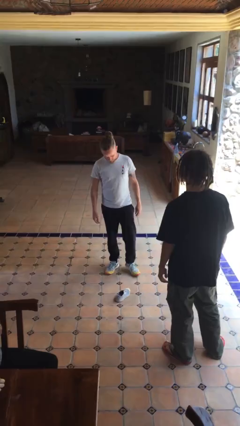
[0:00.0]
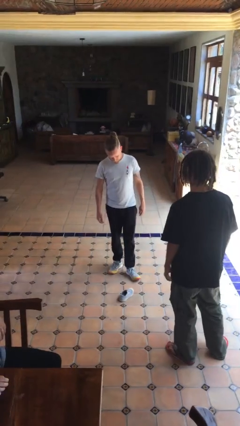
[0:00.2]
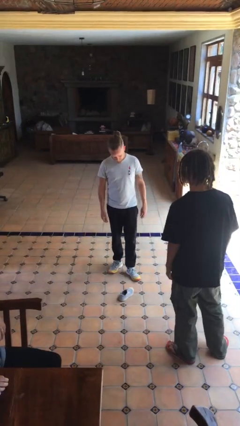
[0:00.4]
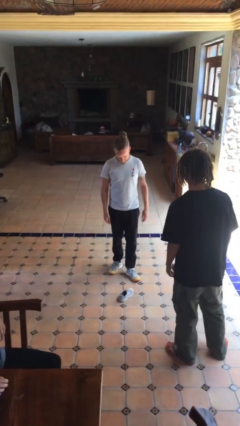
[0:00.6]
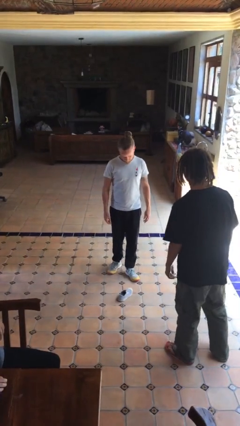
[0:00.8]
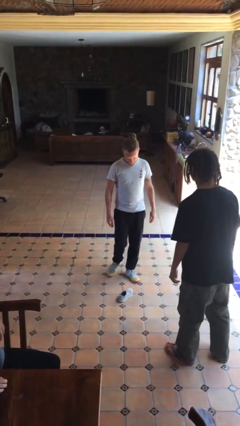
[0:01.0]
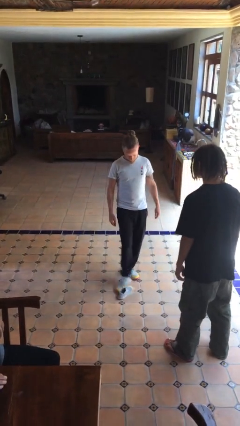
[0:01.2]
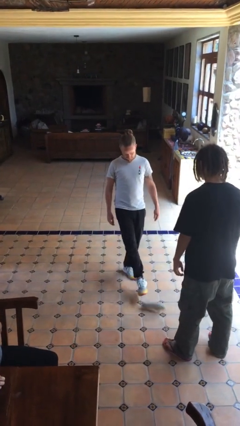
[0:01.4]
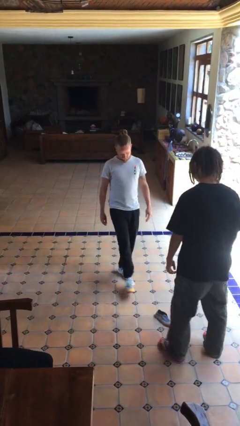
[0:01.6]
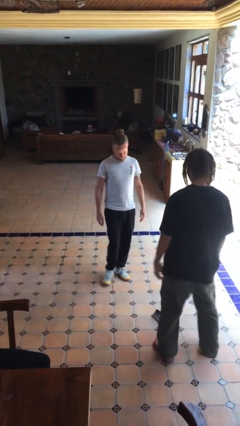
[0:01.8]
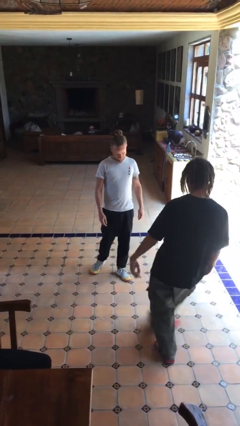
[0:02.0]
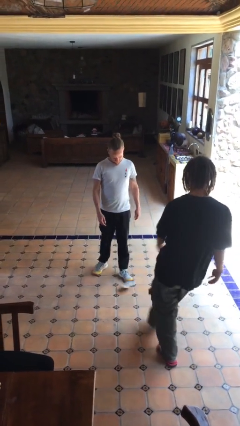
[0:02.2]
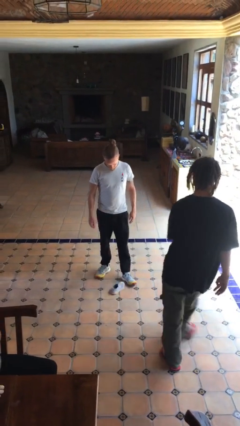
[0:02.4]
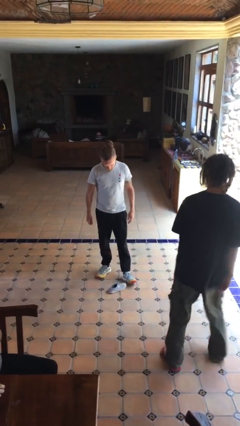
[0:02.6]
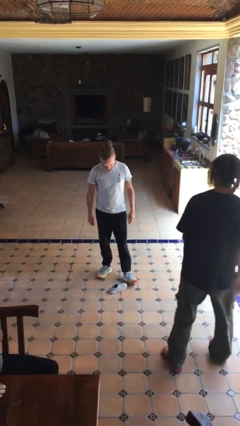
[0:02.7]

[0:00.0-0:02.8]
person kicks object to person

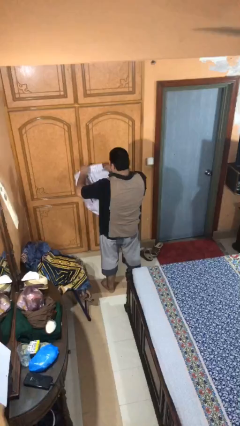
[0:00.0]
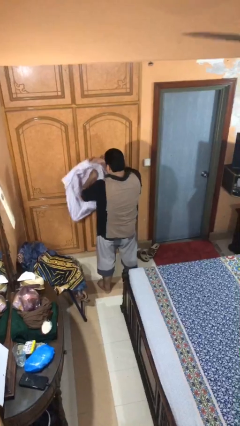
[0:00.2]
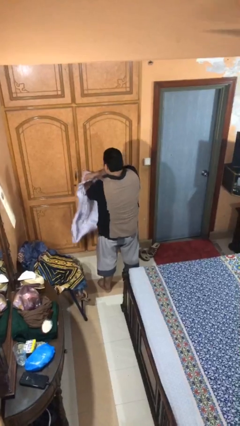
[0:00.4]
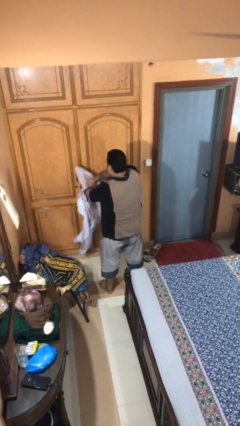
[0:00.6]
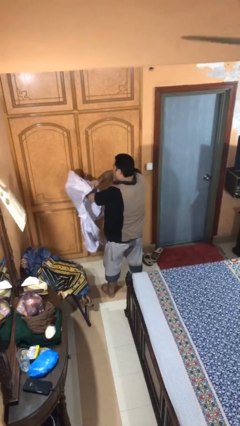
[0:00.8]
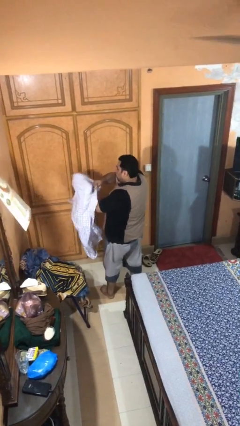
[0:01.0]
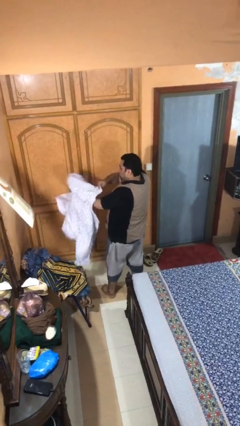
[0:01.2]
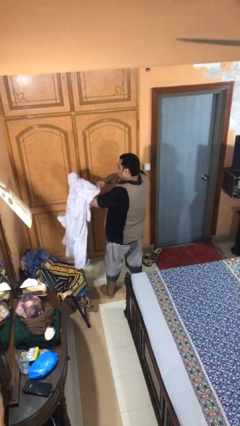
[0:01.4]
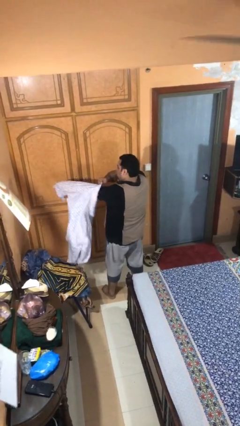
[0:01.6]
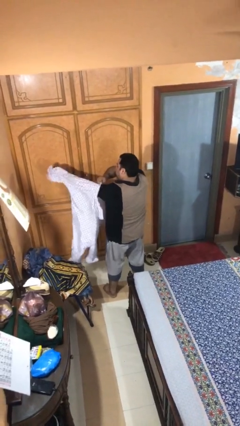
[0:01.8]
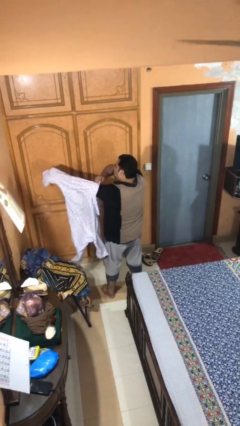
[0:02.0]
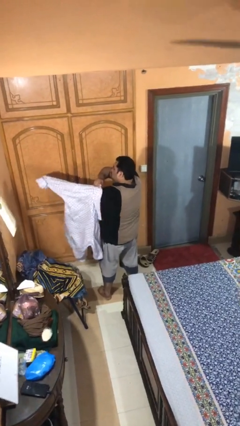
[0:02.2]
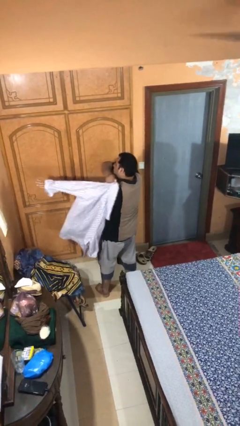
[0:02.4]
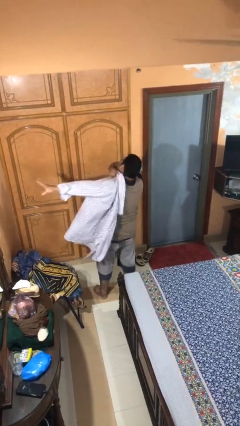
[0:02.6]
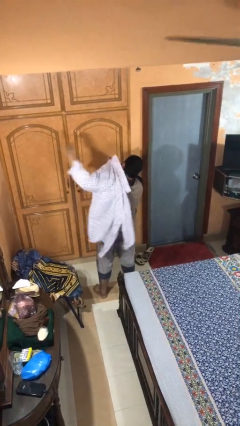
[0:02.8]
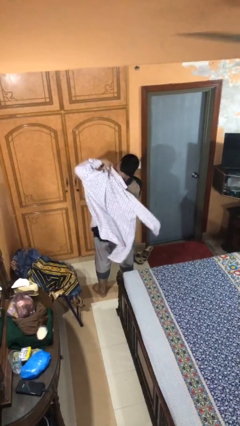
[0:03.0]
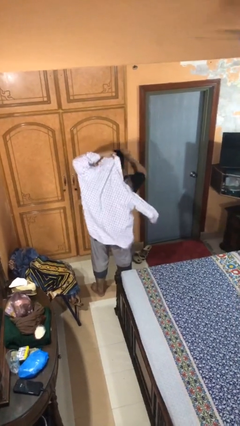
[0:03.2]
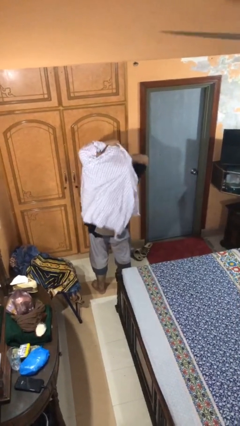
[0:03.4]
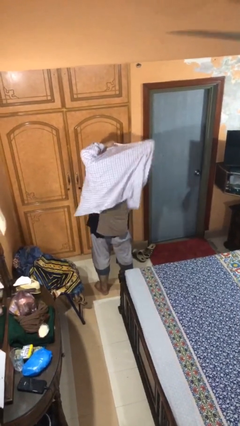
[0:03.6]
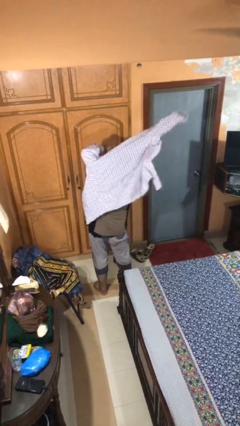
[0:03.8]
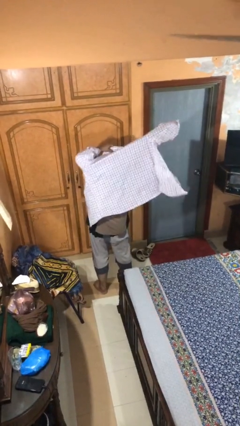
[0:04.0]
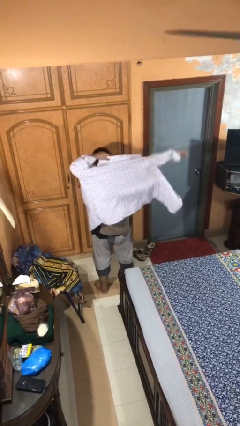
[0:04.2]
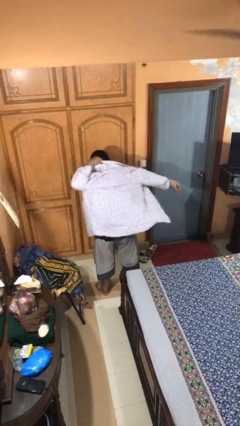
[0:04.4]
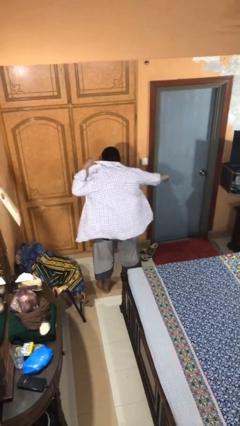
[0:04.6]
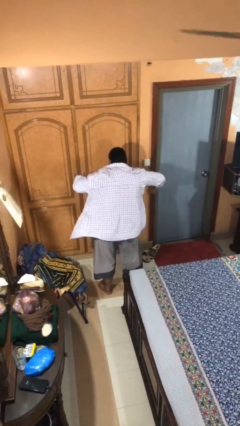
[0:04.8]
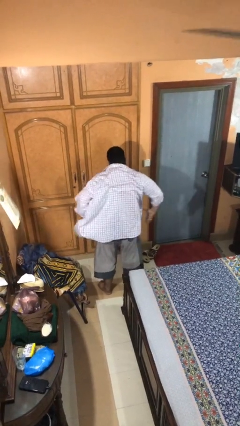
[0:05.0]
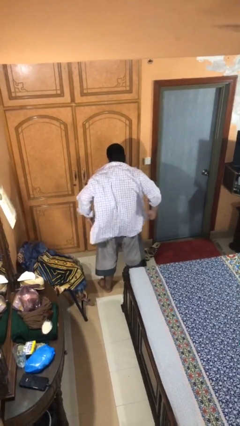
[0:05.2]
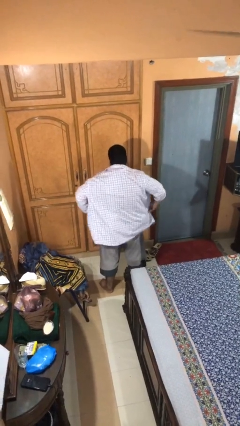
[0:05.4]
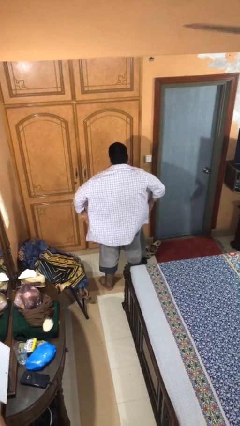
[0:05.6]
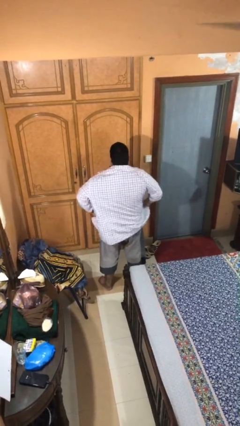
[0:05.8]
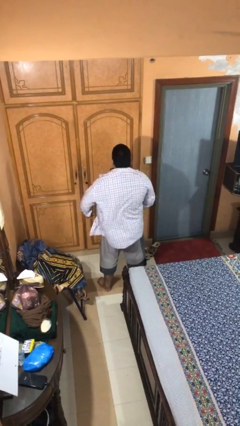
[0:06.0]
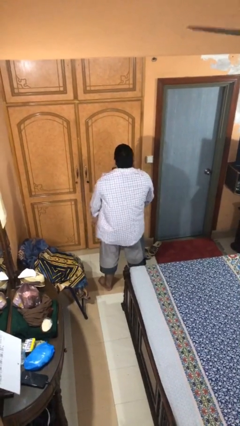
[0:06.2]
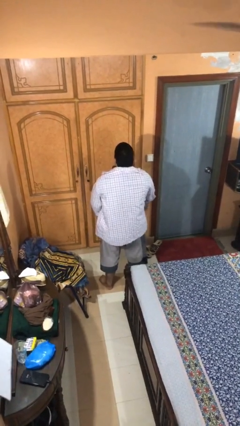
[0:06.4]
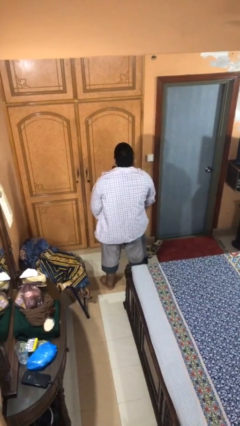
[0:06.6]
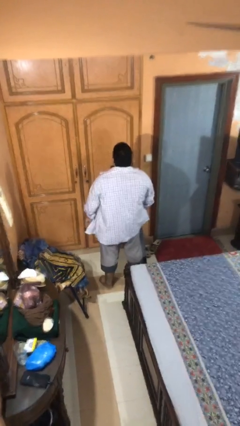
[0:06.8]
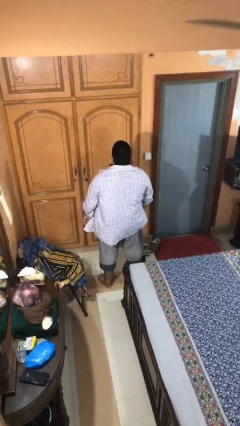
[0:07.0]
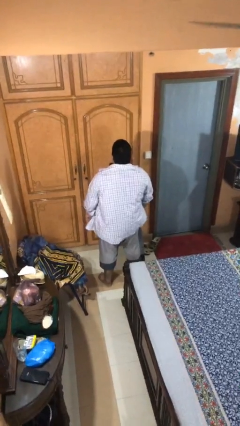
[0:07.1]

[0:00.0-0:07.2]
person puts on shirt

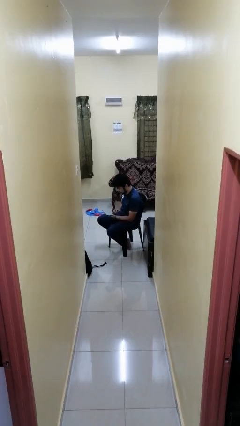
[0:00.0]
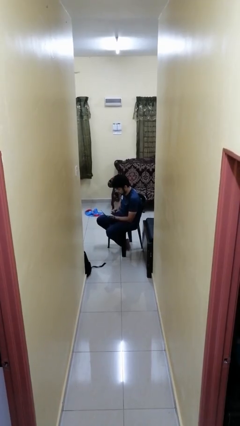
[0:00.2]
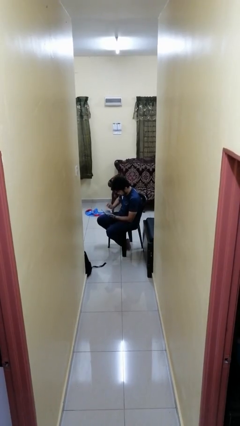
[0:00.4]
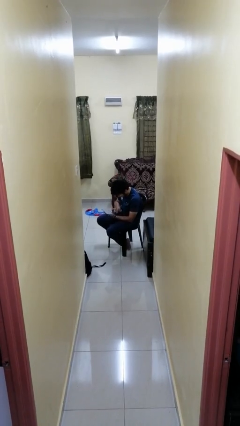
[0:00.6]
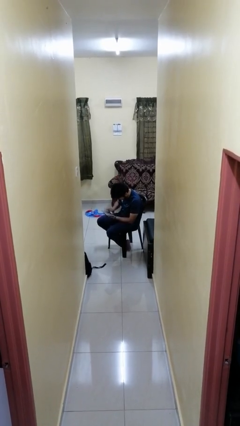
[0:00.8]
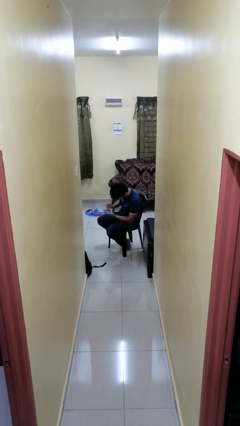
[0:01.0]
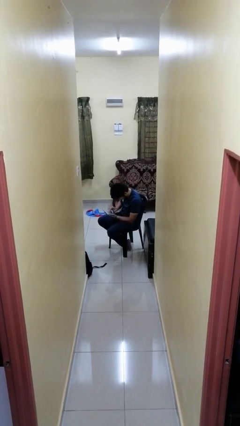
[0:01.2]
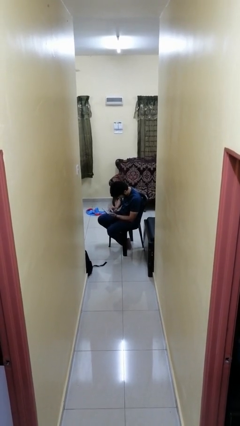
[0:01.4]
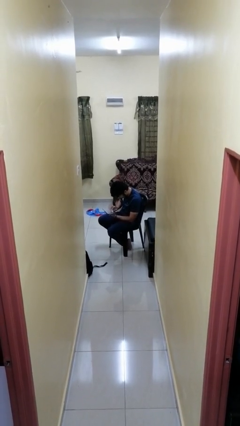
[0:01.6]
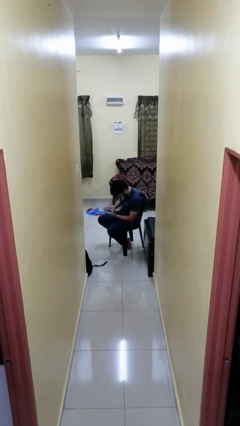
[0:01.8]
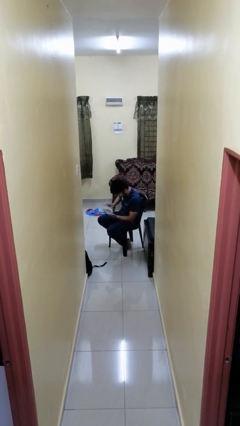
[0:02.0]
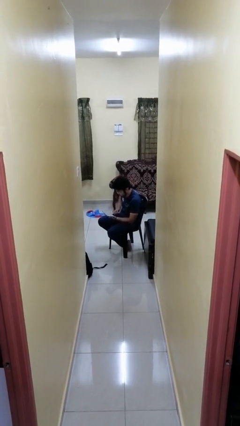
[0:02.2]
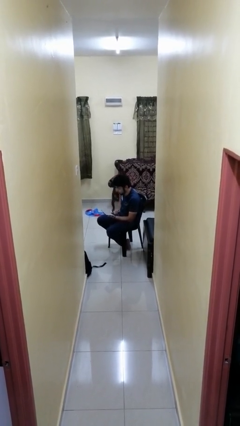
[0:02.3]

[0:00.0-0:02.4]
person interacts with tablet

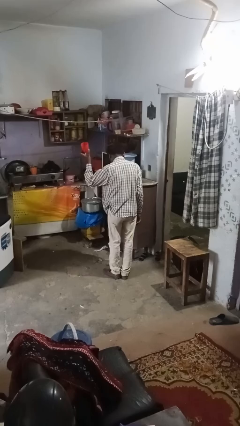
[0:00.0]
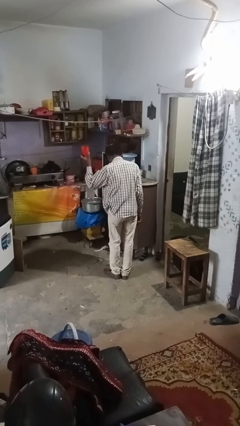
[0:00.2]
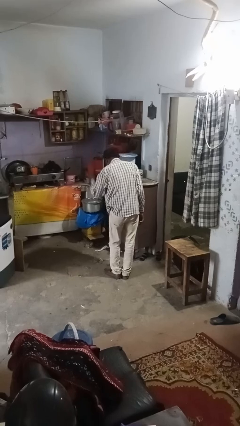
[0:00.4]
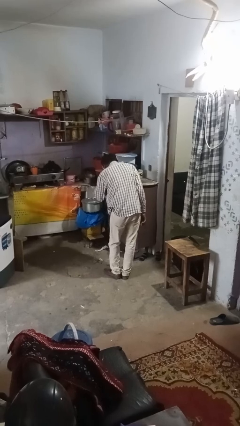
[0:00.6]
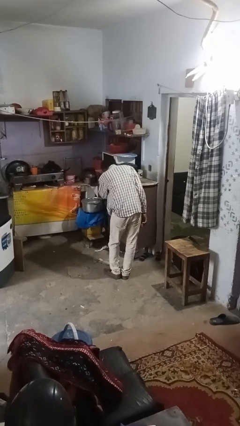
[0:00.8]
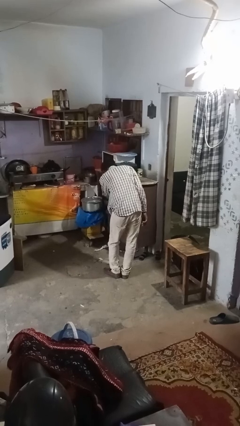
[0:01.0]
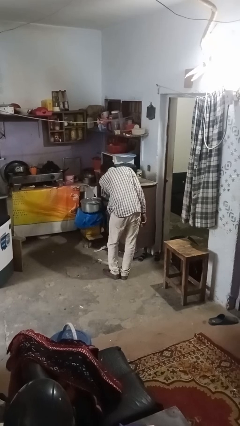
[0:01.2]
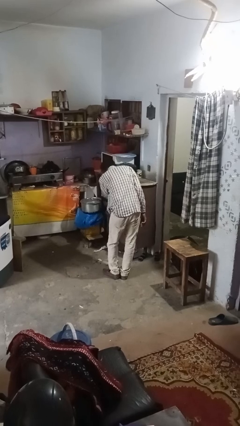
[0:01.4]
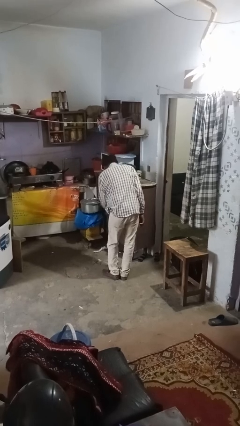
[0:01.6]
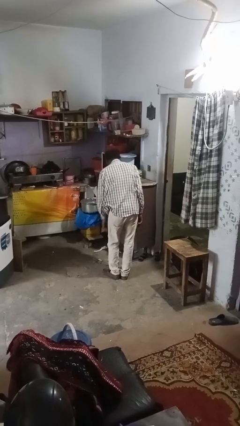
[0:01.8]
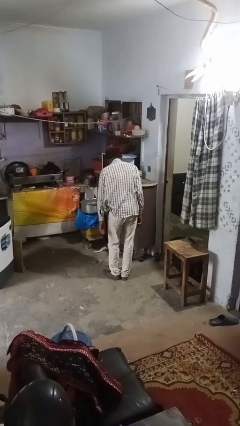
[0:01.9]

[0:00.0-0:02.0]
person puts object into kitchen drawer

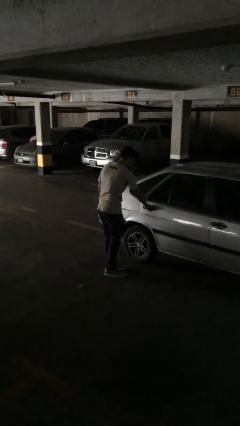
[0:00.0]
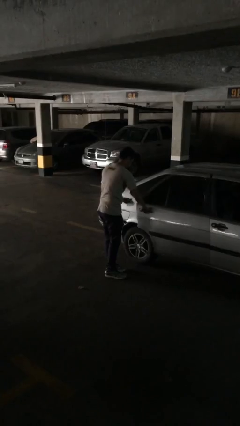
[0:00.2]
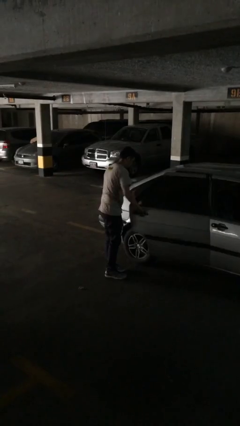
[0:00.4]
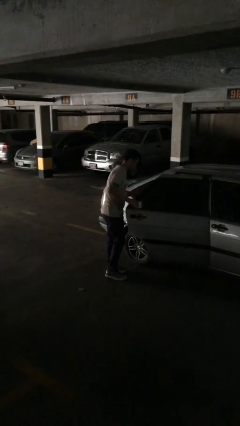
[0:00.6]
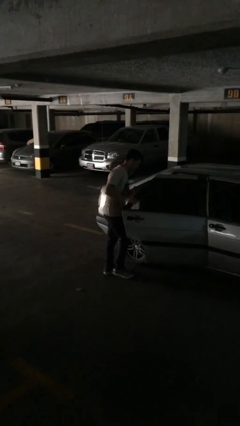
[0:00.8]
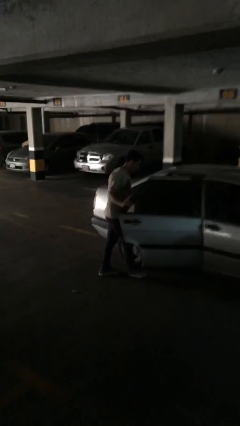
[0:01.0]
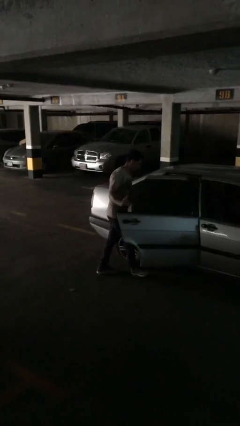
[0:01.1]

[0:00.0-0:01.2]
person opens car door

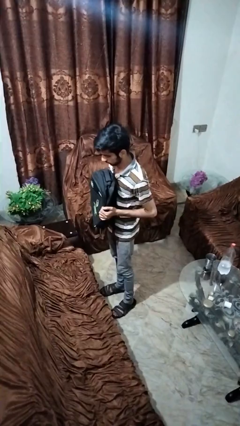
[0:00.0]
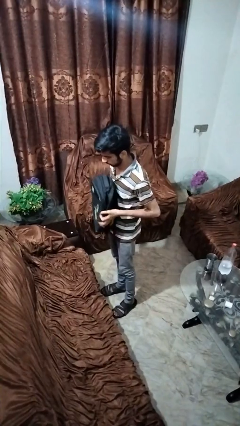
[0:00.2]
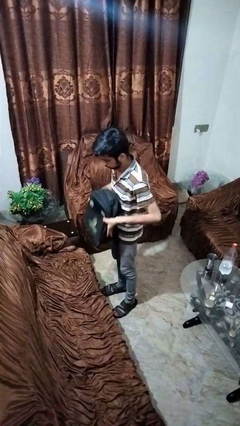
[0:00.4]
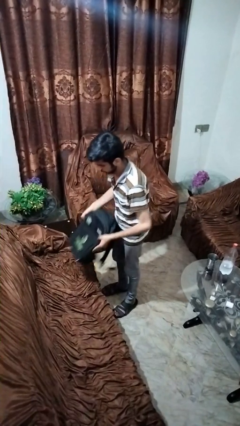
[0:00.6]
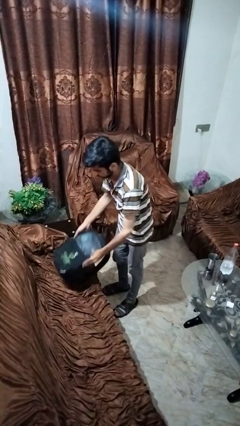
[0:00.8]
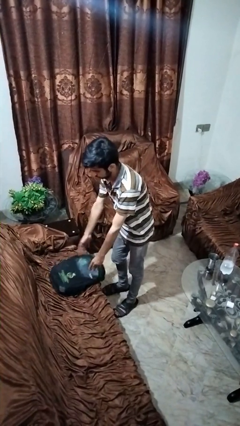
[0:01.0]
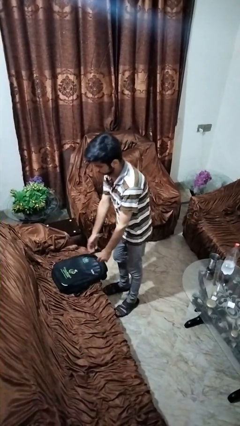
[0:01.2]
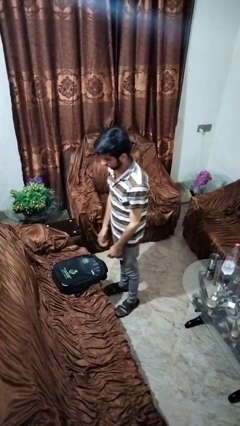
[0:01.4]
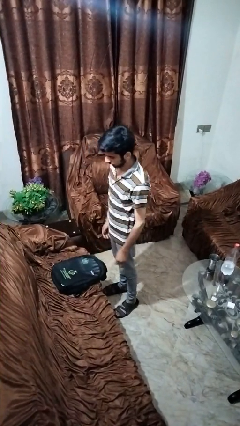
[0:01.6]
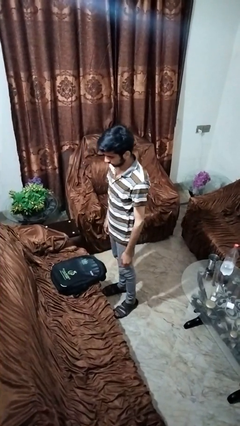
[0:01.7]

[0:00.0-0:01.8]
person puts down object on couch
